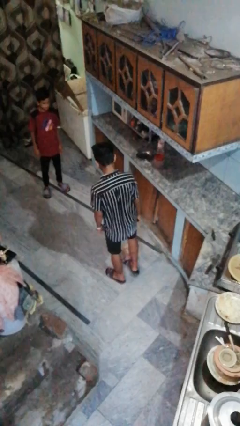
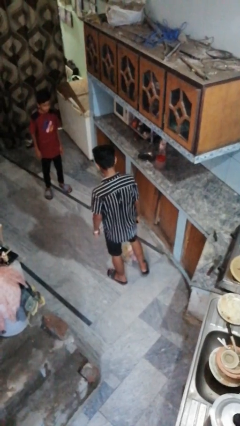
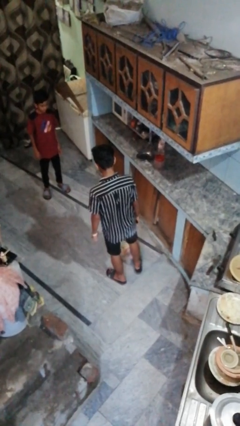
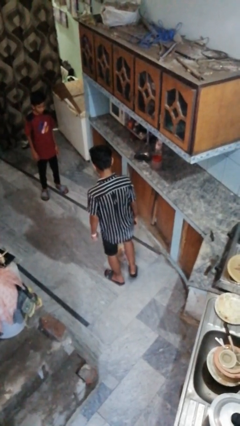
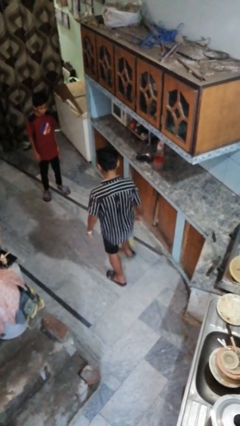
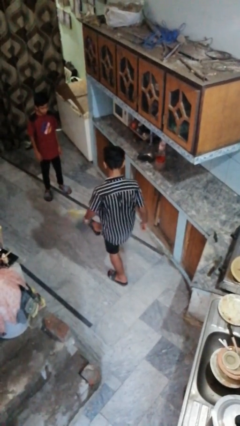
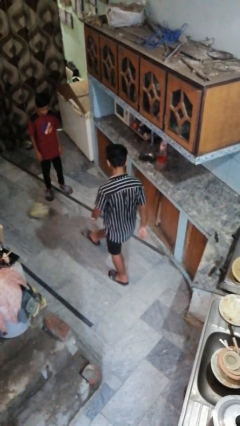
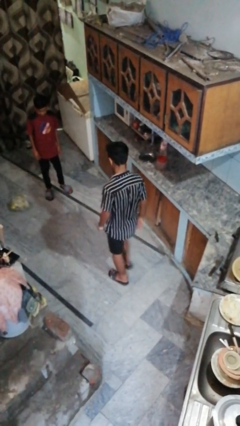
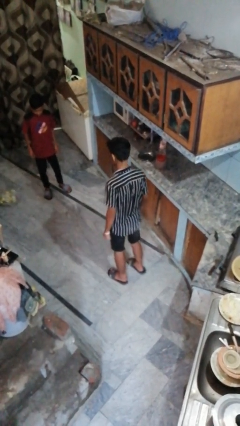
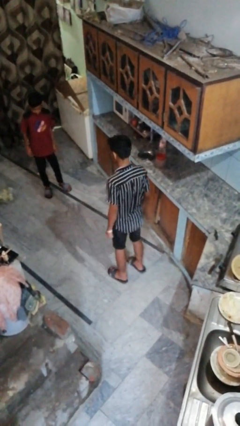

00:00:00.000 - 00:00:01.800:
person kicks object to person

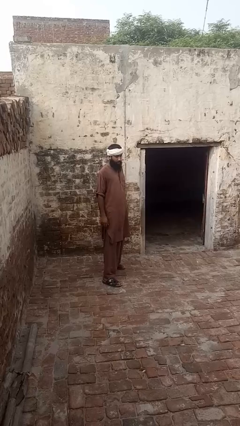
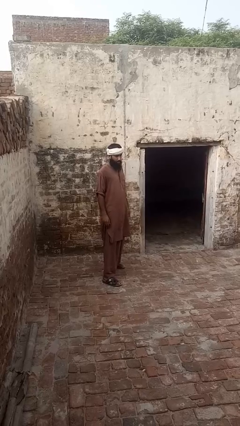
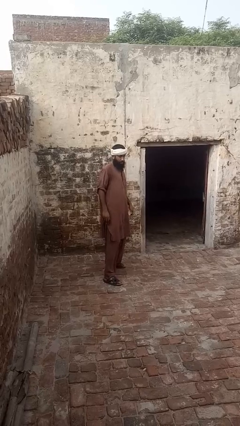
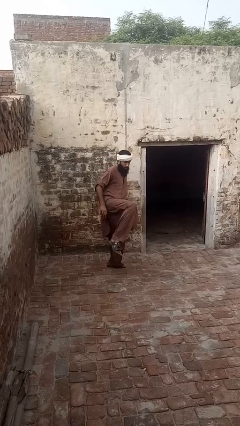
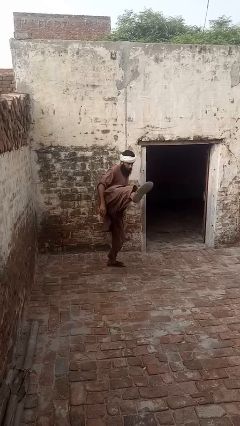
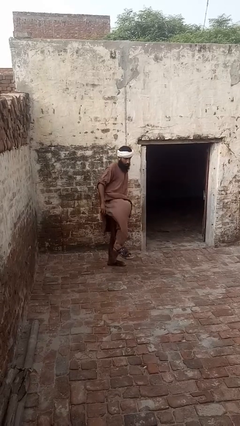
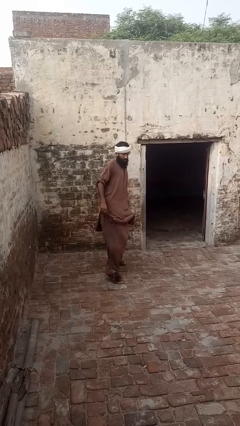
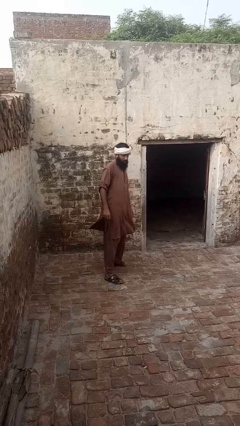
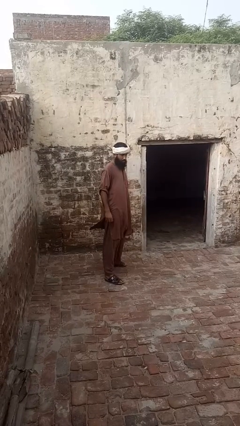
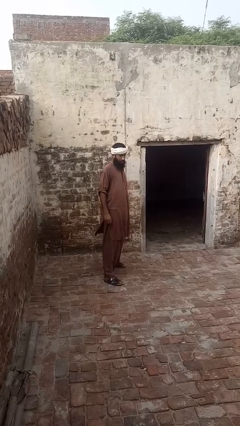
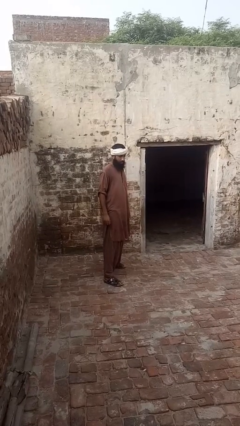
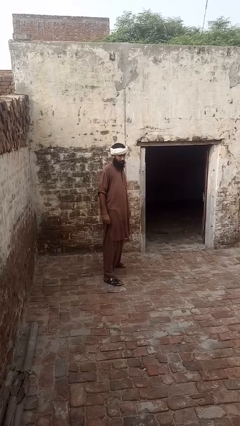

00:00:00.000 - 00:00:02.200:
person karate kicks

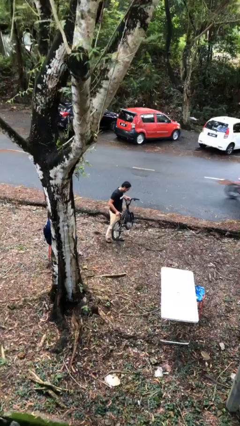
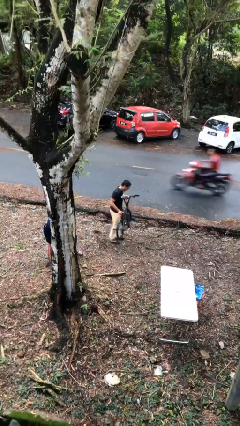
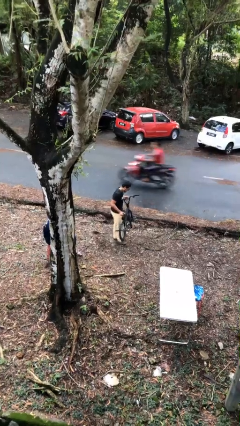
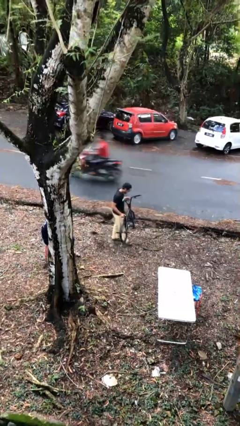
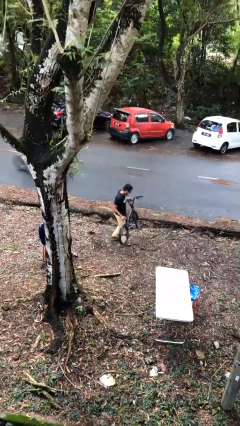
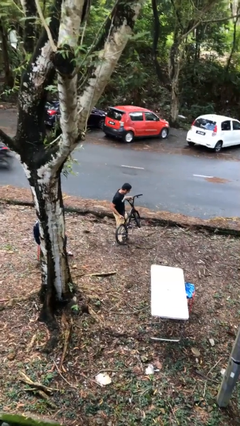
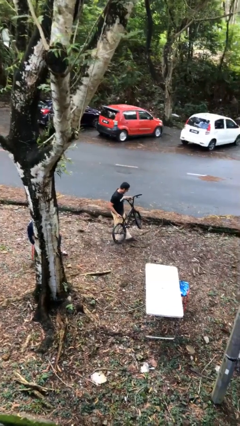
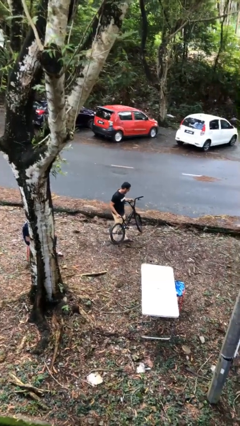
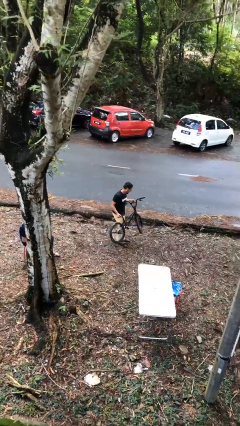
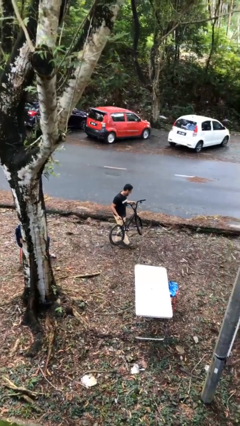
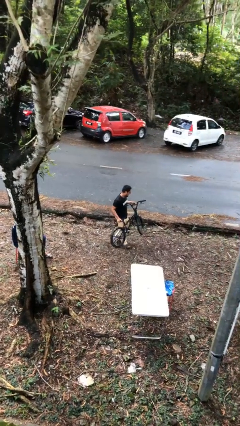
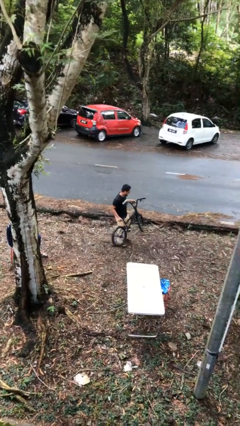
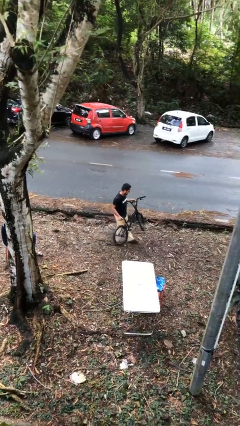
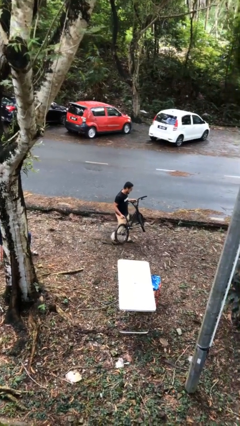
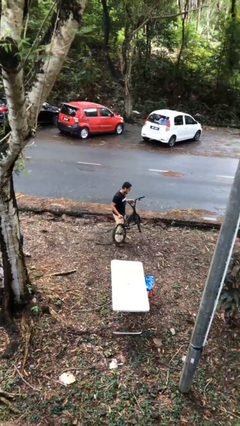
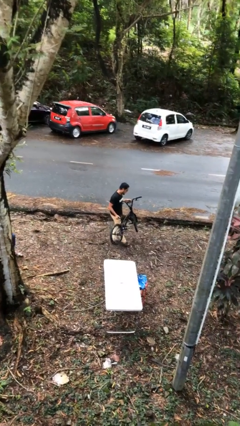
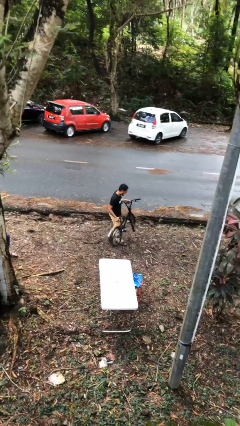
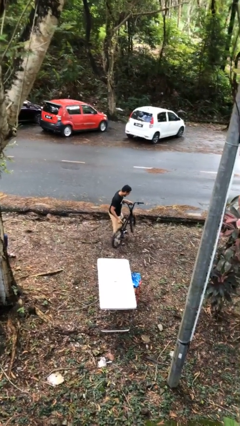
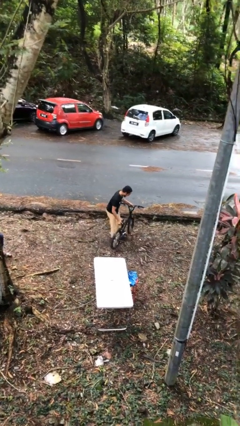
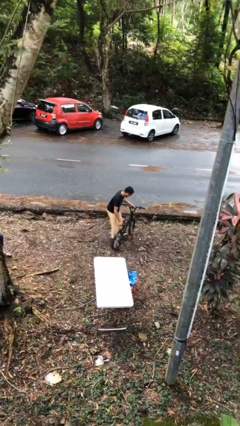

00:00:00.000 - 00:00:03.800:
person carries heavy object

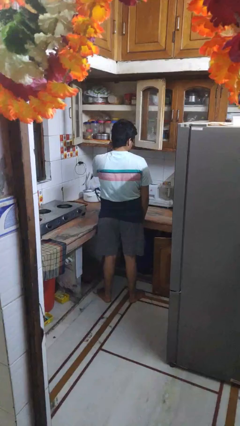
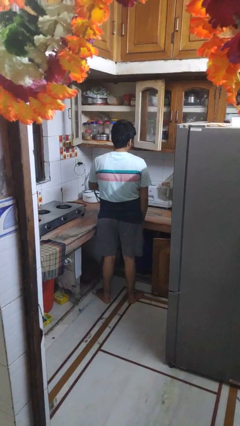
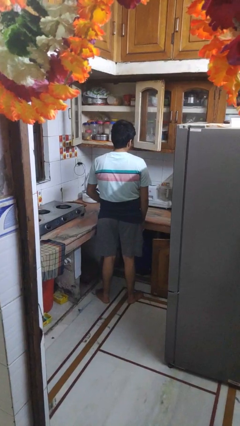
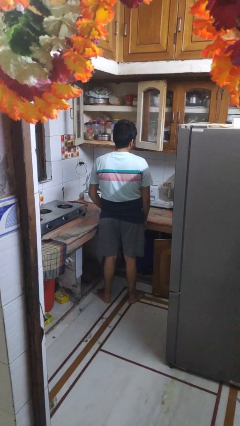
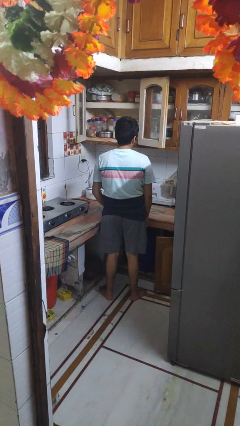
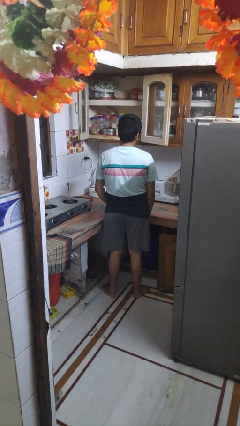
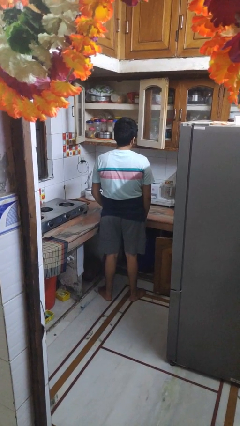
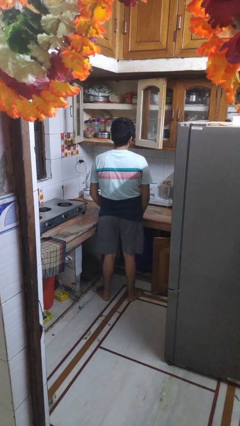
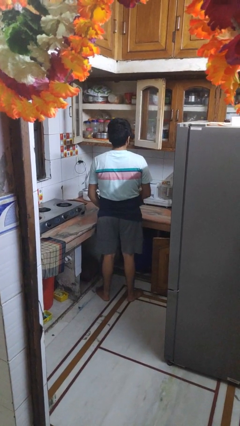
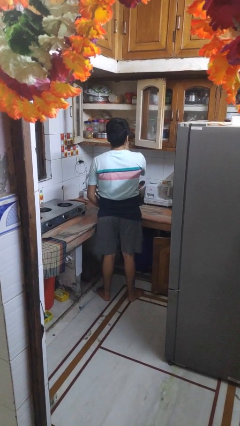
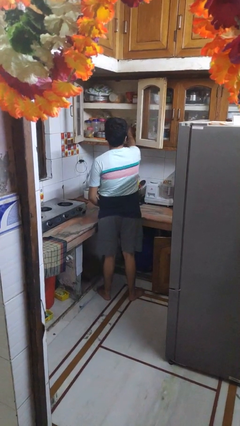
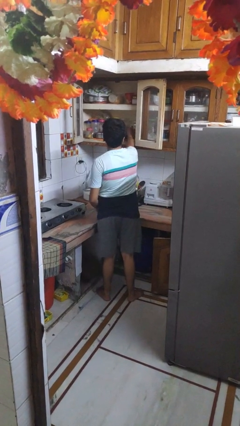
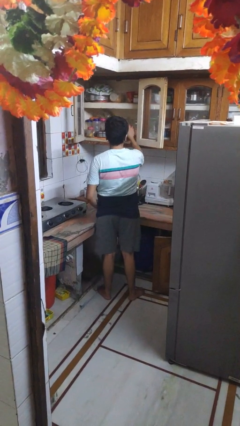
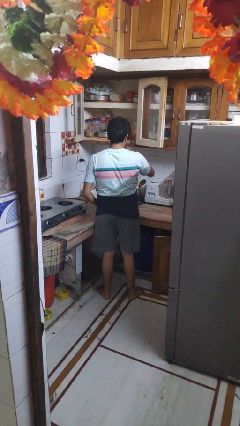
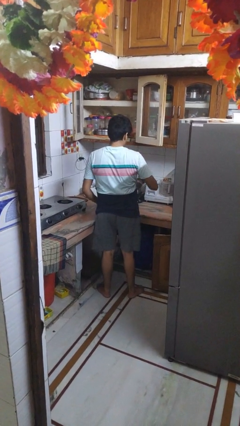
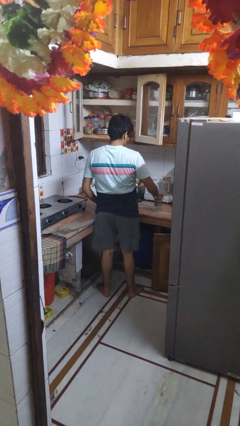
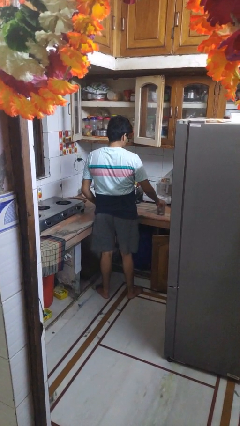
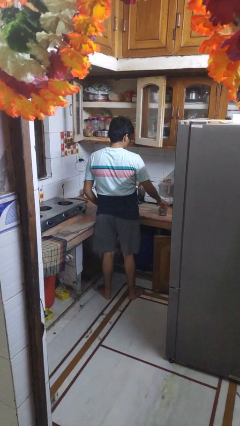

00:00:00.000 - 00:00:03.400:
person takes object from cabinet

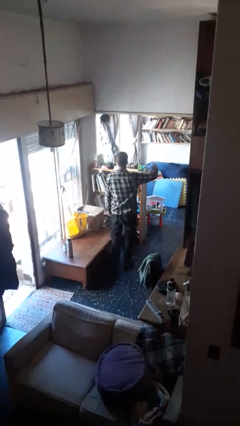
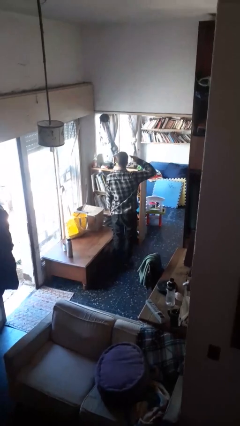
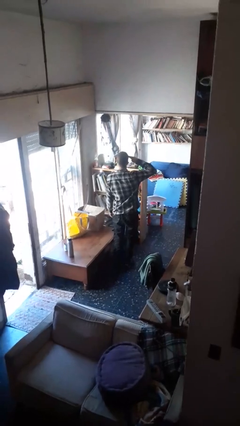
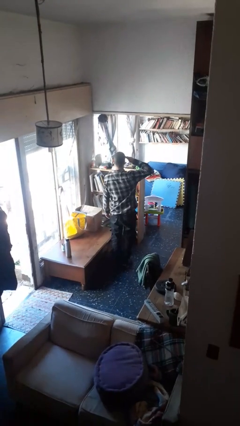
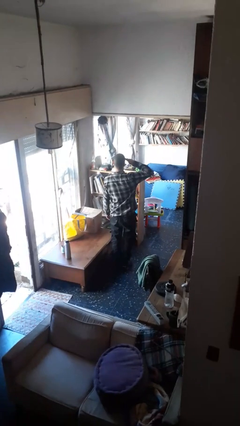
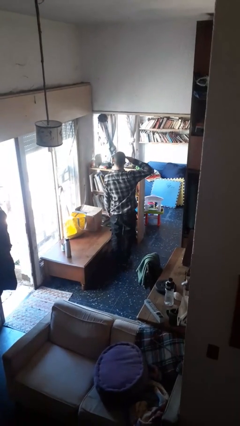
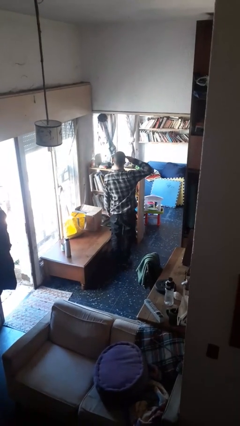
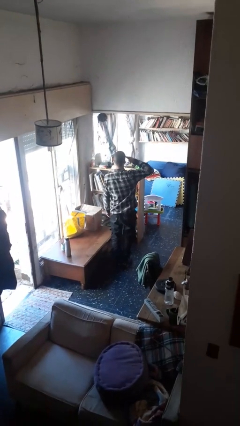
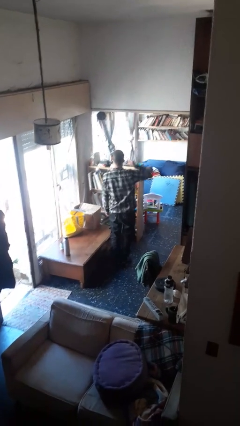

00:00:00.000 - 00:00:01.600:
person salutes

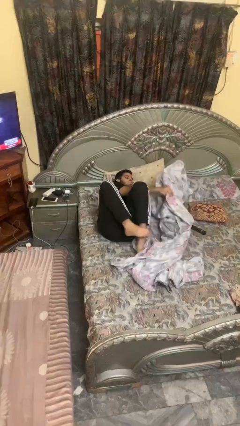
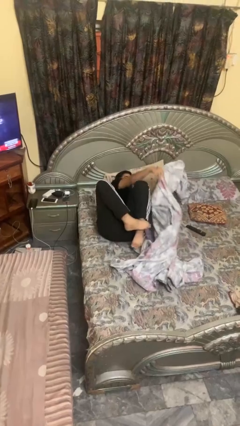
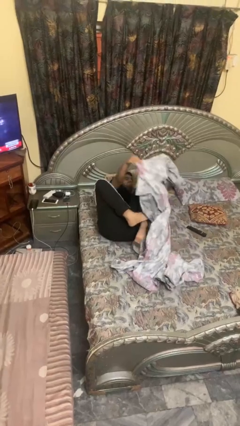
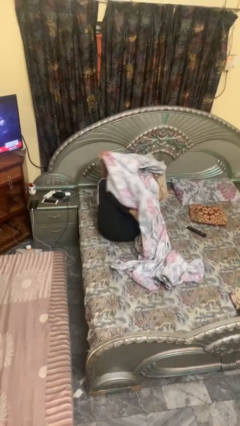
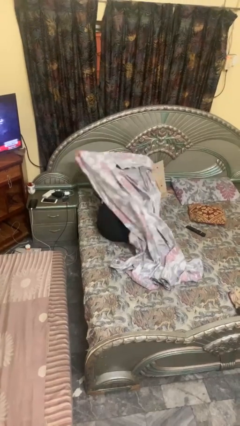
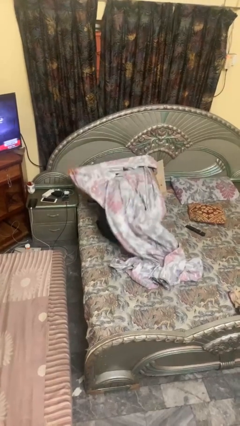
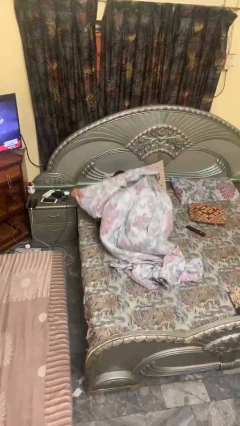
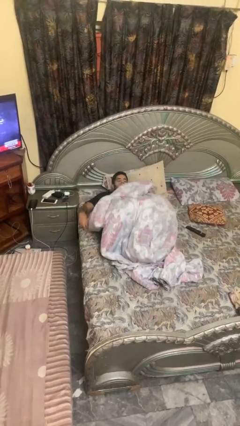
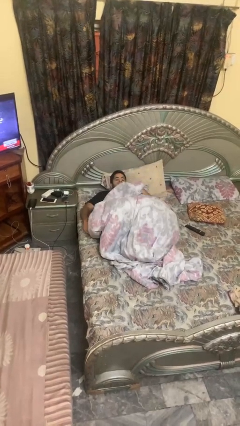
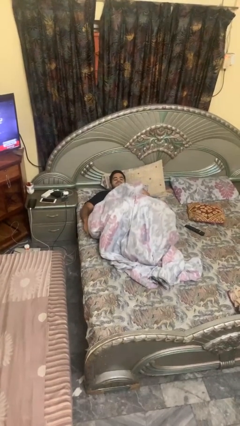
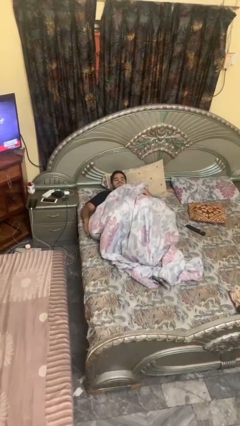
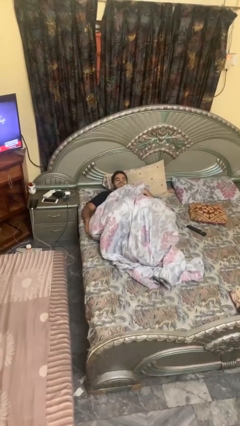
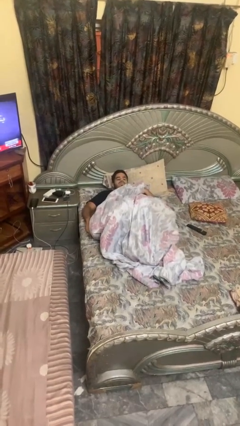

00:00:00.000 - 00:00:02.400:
person covers with bedsheets

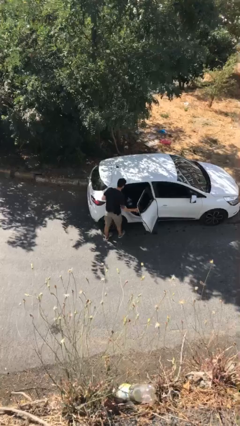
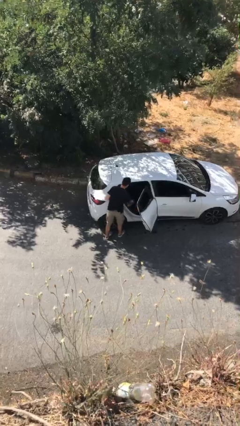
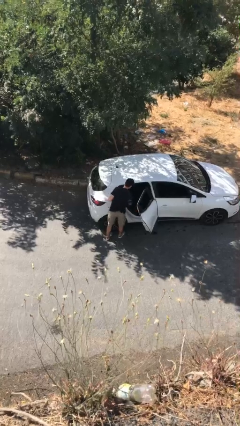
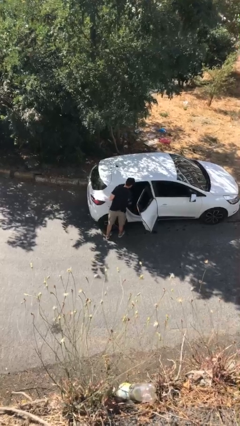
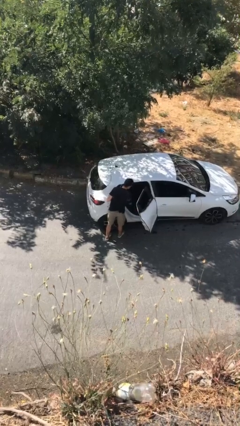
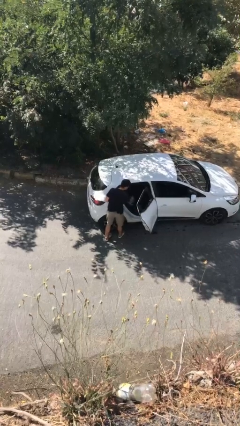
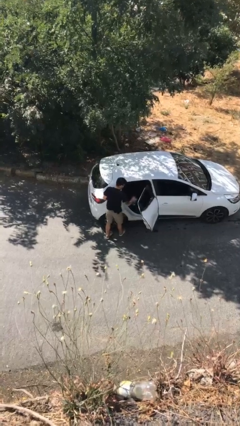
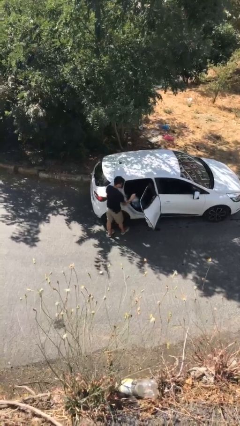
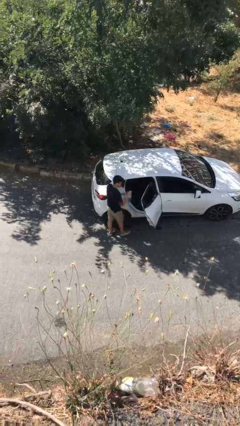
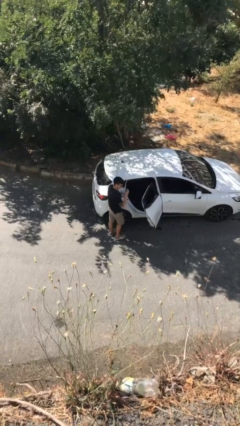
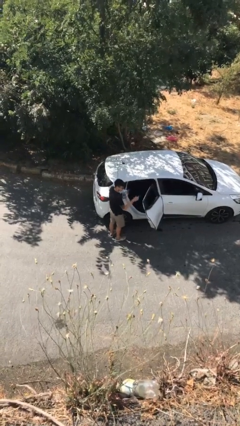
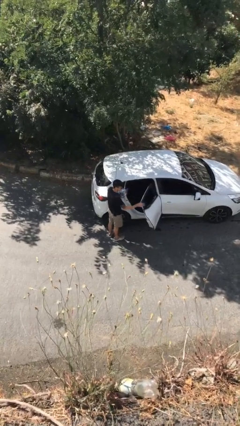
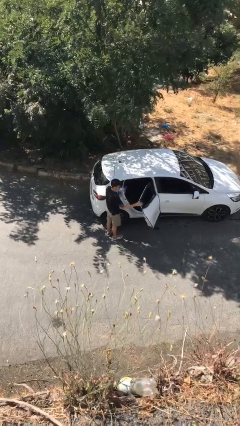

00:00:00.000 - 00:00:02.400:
person unloads car
